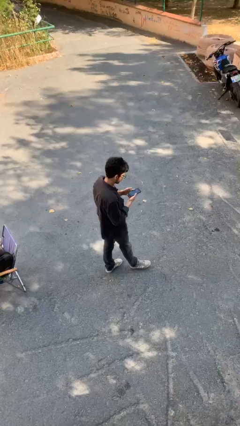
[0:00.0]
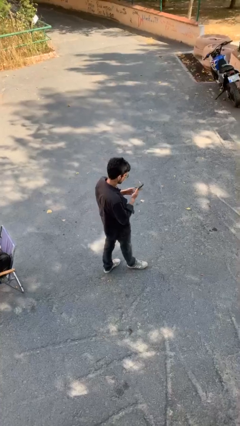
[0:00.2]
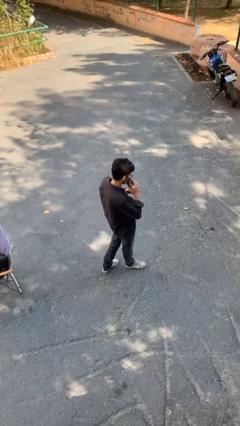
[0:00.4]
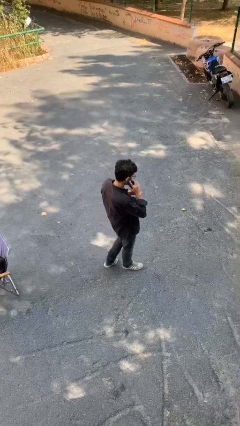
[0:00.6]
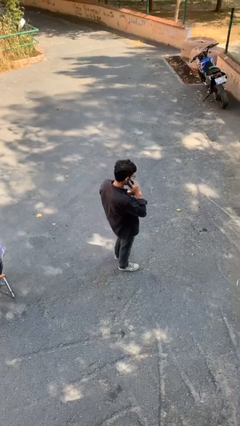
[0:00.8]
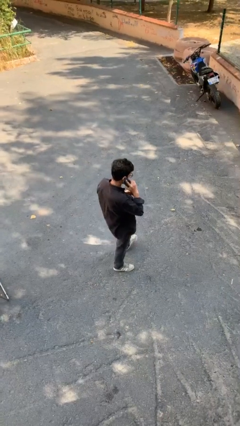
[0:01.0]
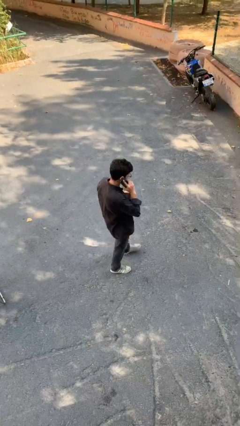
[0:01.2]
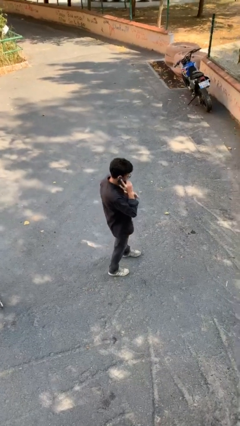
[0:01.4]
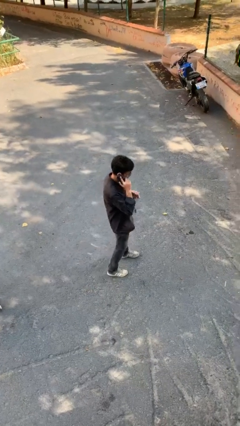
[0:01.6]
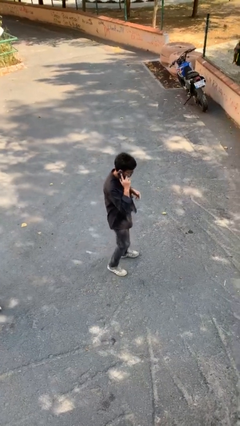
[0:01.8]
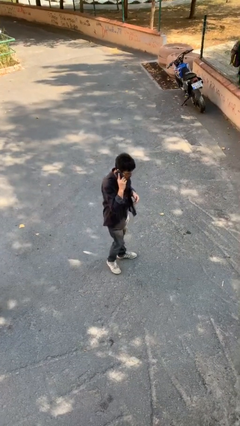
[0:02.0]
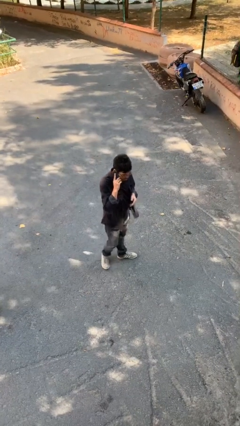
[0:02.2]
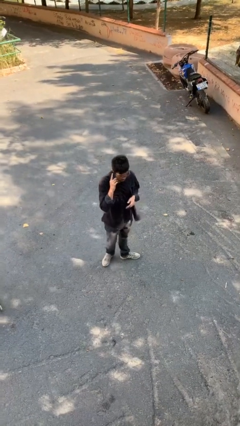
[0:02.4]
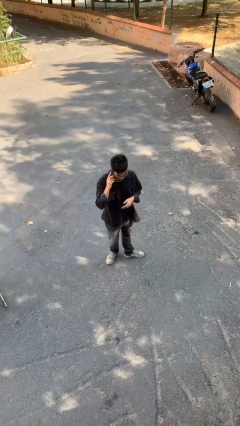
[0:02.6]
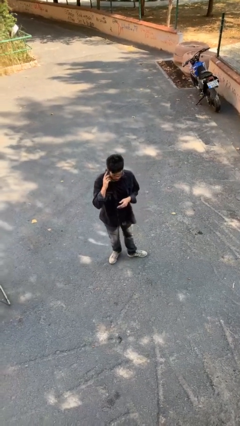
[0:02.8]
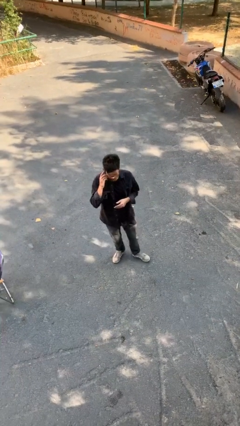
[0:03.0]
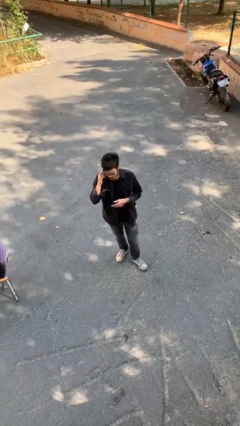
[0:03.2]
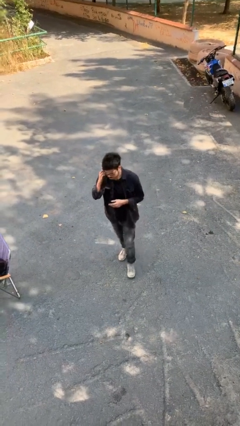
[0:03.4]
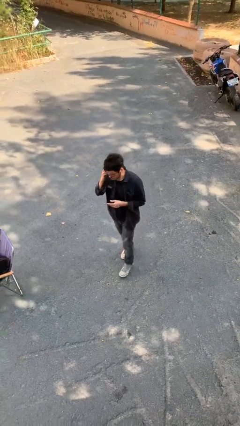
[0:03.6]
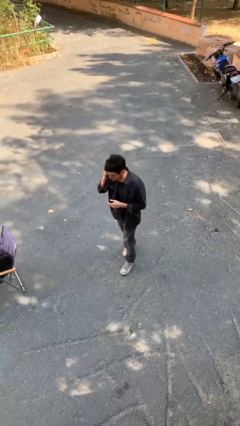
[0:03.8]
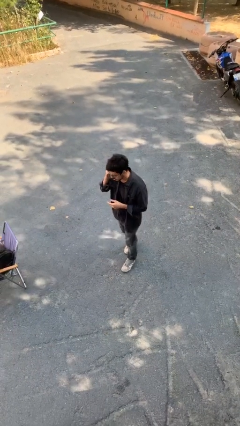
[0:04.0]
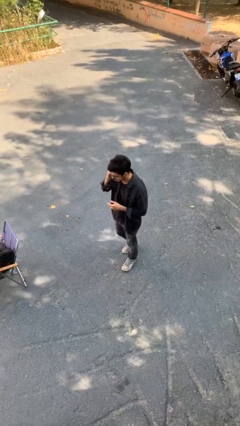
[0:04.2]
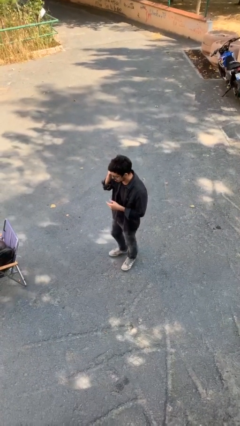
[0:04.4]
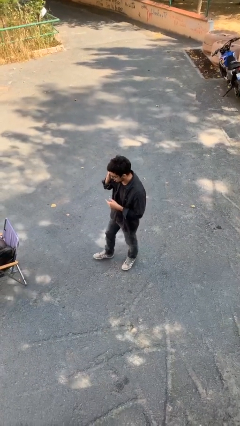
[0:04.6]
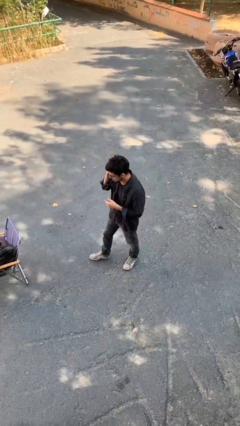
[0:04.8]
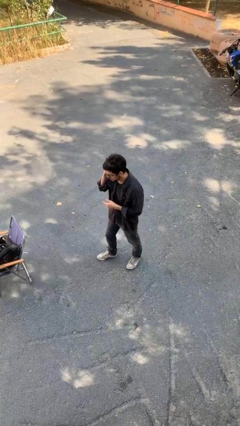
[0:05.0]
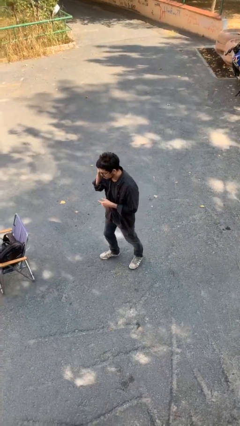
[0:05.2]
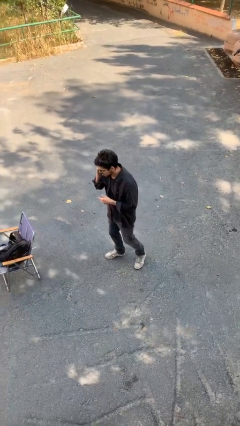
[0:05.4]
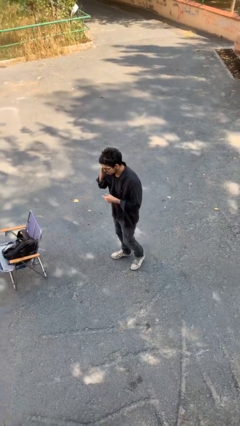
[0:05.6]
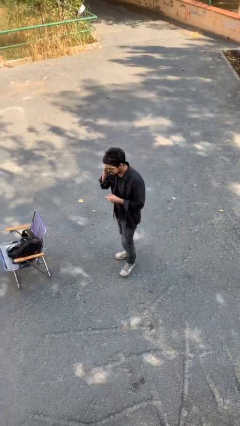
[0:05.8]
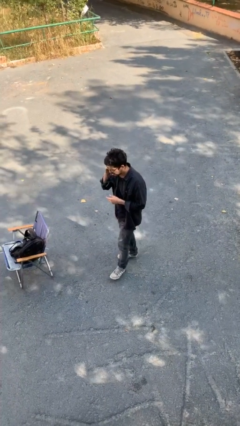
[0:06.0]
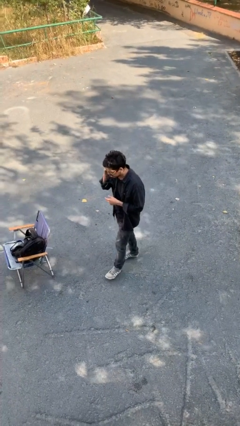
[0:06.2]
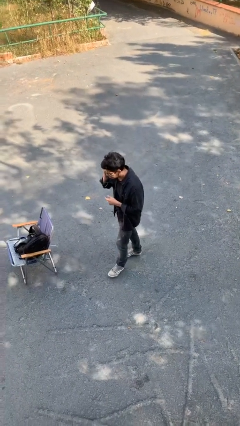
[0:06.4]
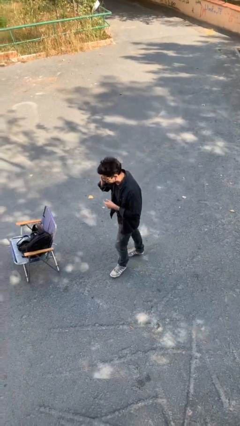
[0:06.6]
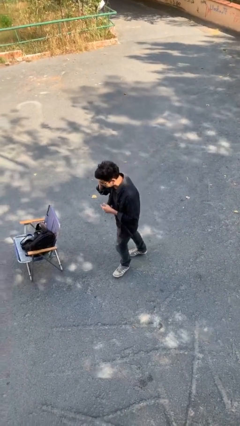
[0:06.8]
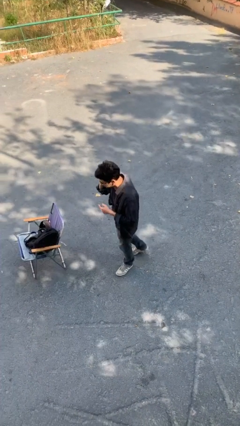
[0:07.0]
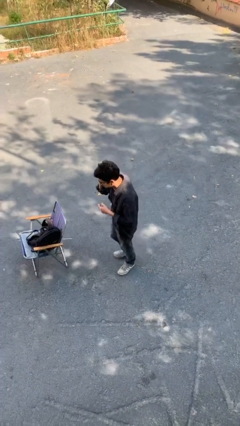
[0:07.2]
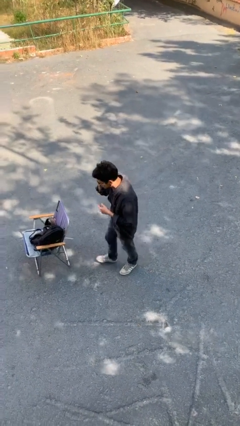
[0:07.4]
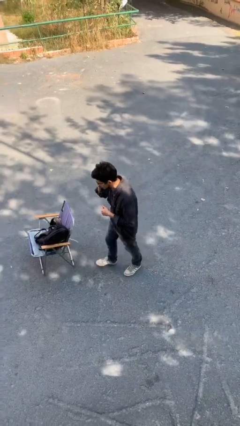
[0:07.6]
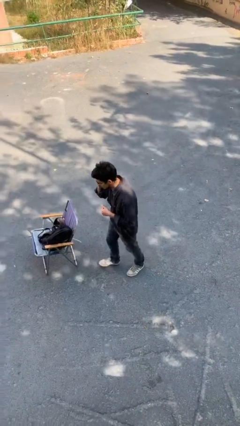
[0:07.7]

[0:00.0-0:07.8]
person talks on phone

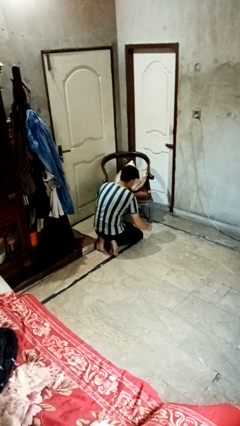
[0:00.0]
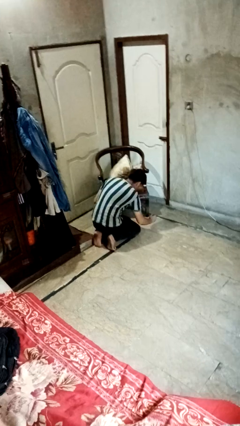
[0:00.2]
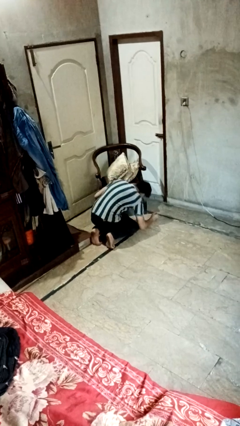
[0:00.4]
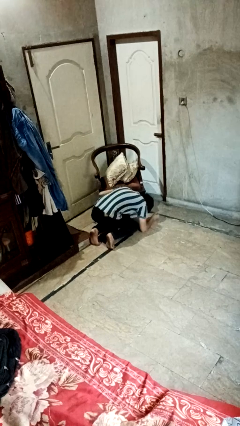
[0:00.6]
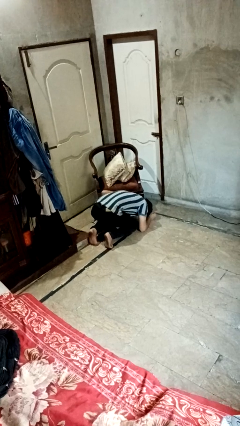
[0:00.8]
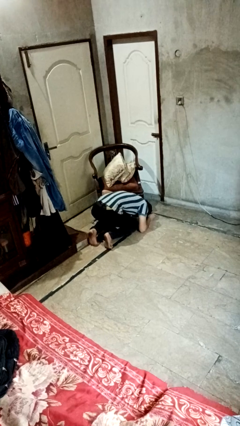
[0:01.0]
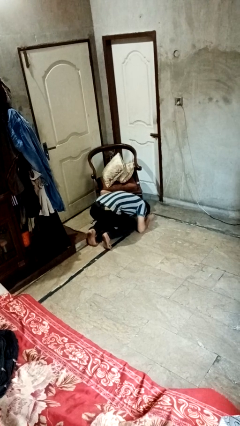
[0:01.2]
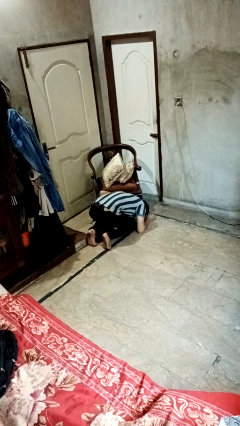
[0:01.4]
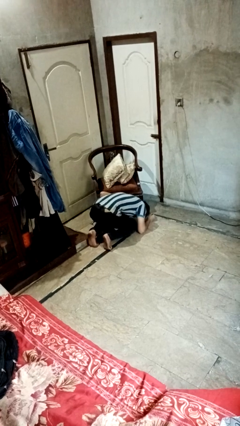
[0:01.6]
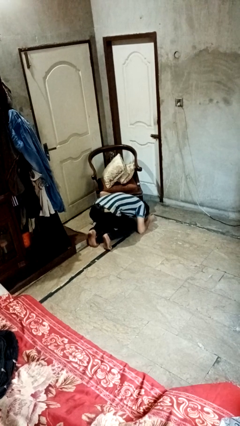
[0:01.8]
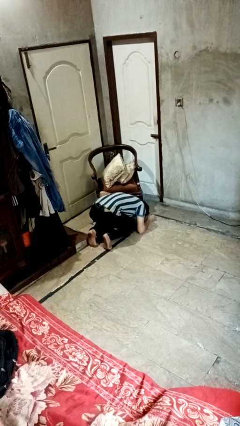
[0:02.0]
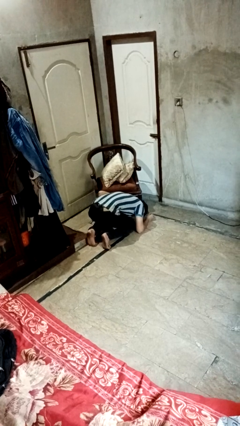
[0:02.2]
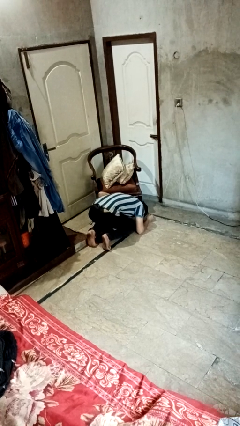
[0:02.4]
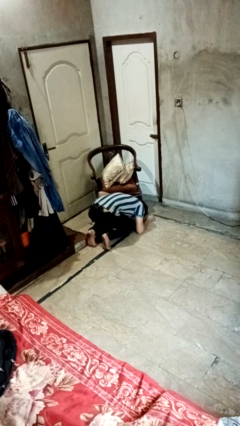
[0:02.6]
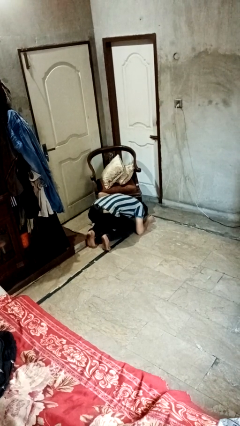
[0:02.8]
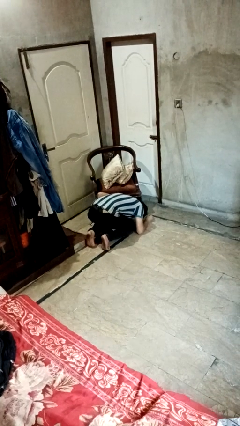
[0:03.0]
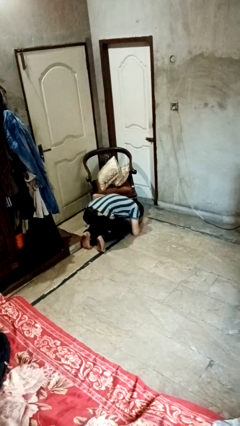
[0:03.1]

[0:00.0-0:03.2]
person searches under couch

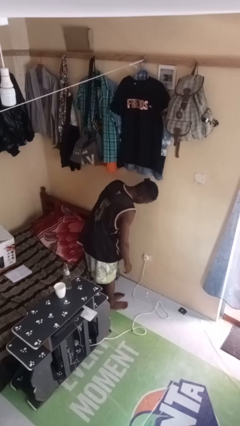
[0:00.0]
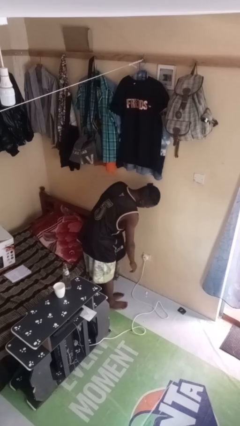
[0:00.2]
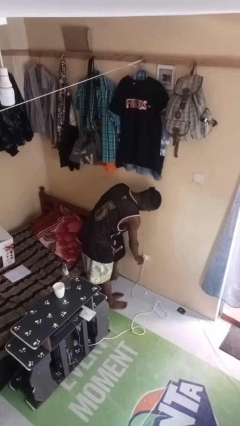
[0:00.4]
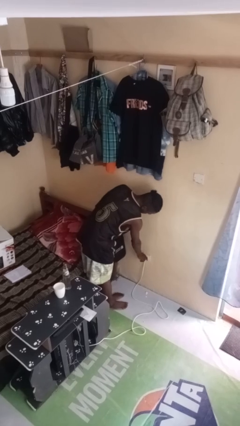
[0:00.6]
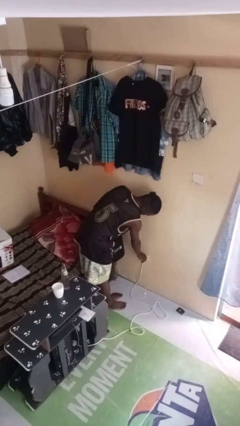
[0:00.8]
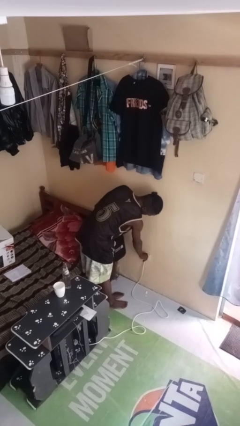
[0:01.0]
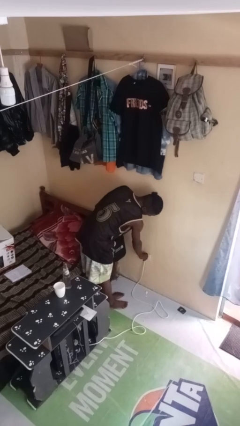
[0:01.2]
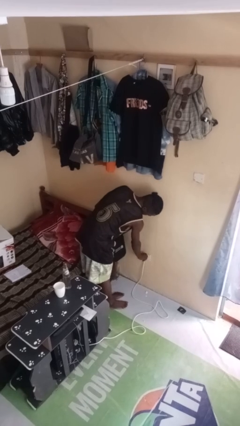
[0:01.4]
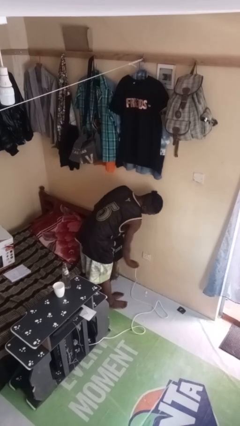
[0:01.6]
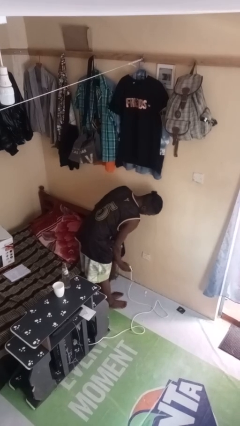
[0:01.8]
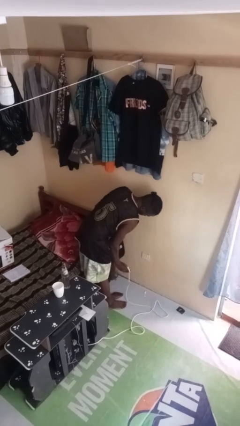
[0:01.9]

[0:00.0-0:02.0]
person unplugs from electrical socket

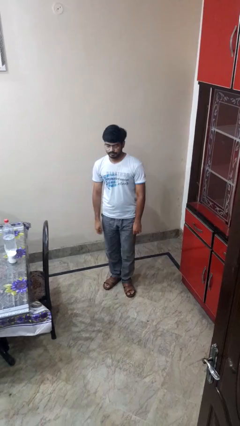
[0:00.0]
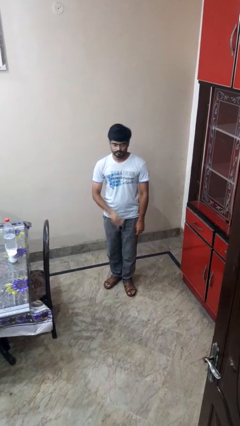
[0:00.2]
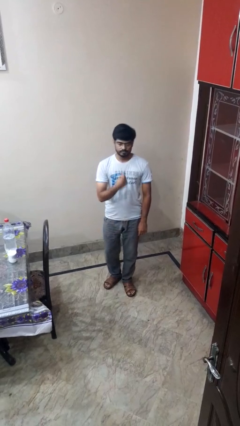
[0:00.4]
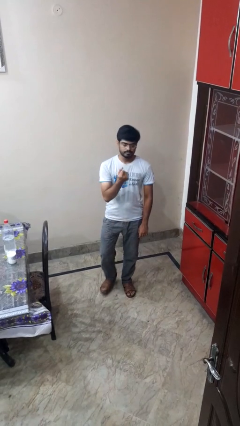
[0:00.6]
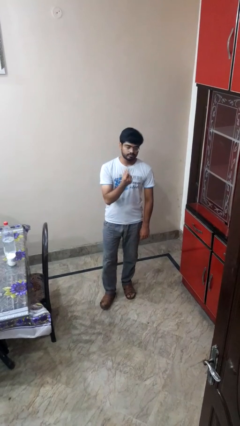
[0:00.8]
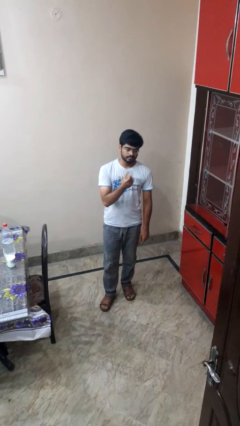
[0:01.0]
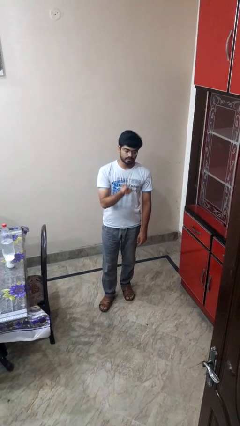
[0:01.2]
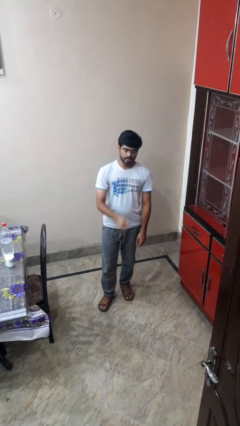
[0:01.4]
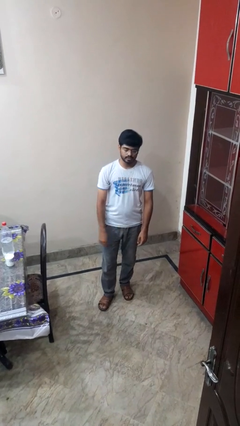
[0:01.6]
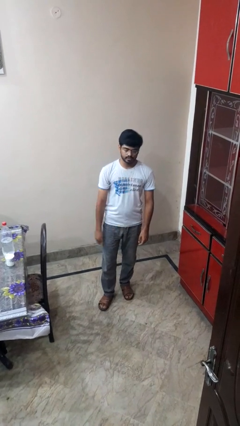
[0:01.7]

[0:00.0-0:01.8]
person snaps fingers

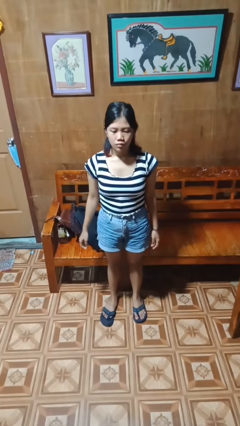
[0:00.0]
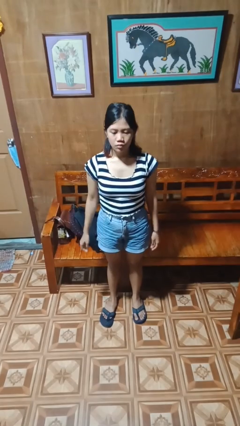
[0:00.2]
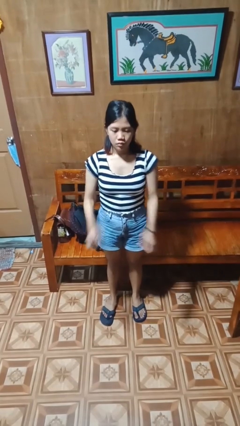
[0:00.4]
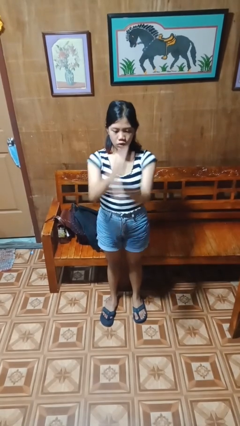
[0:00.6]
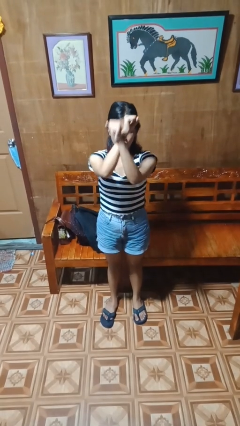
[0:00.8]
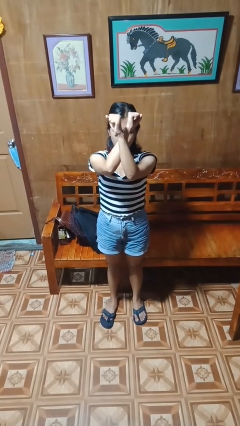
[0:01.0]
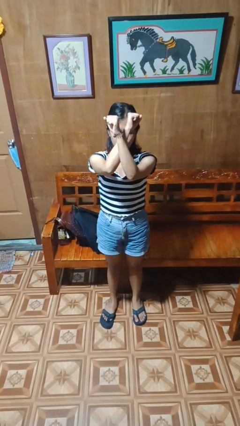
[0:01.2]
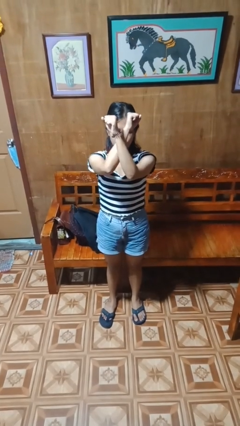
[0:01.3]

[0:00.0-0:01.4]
person gestures arms x

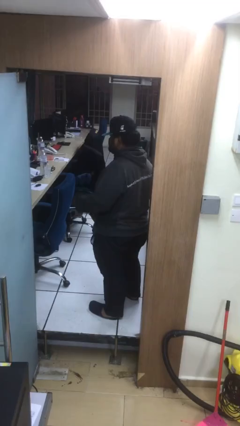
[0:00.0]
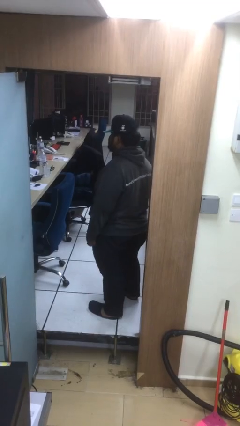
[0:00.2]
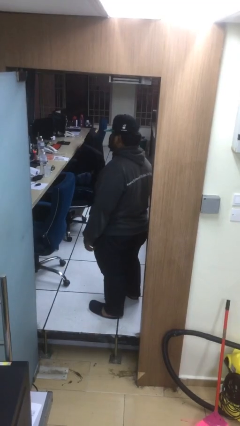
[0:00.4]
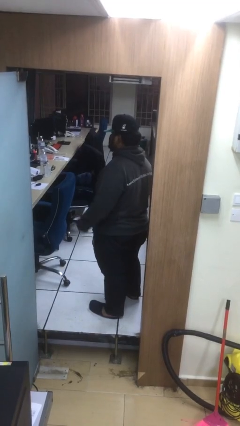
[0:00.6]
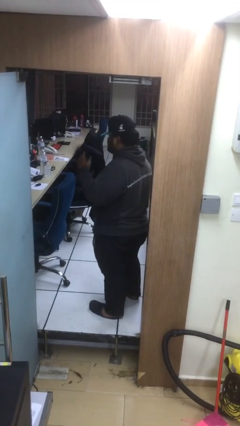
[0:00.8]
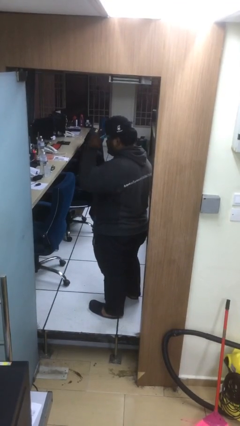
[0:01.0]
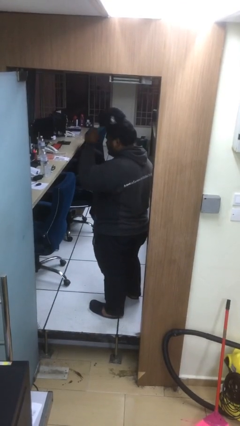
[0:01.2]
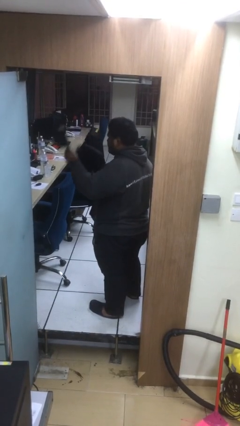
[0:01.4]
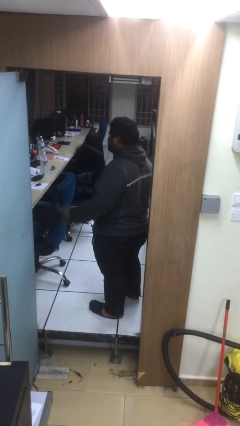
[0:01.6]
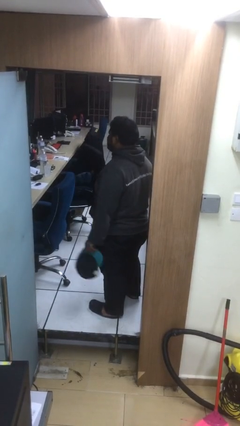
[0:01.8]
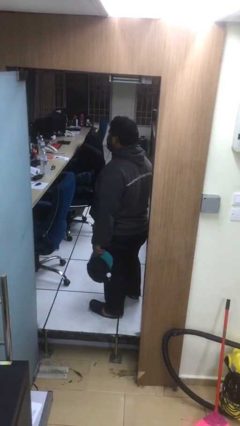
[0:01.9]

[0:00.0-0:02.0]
person takes off hat
